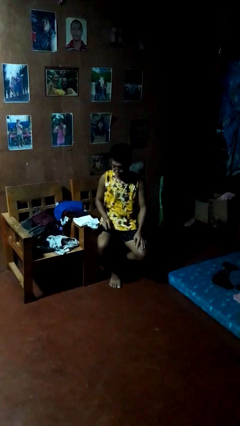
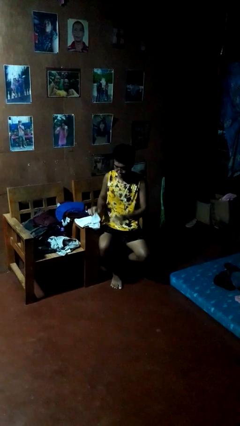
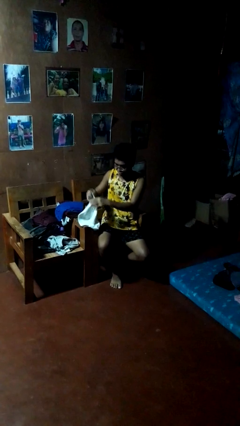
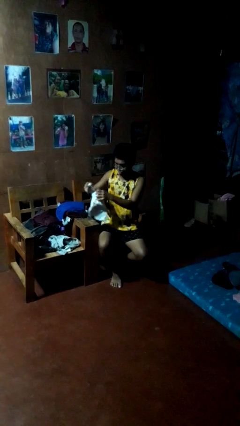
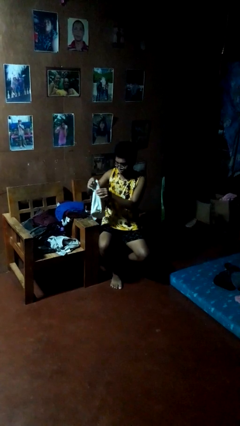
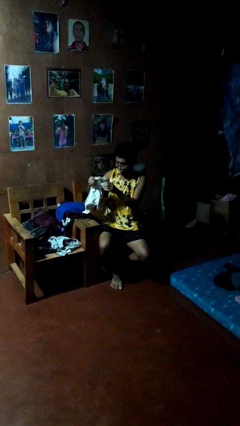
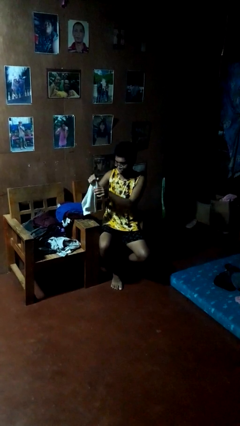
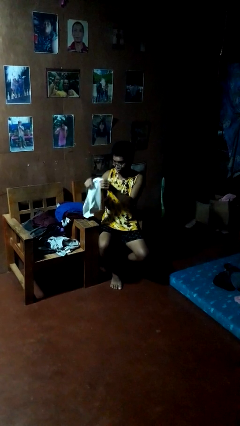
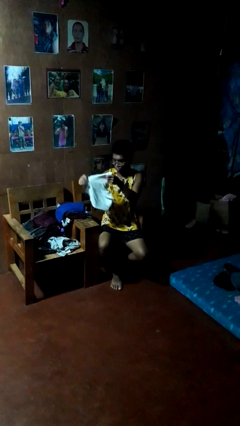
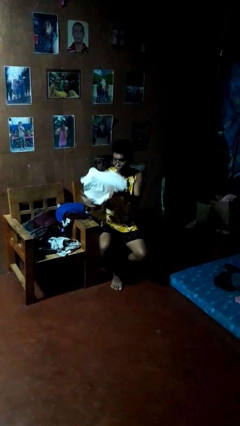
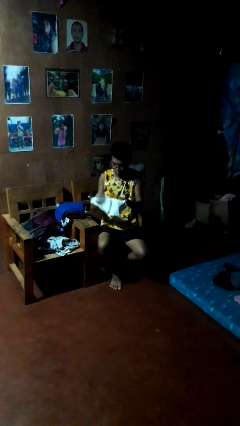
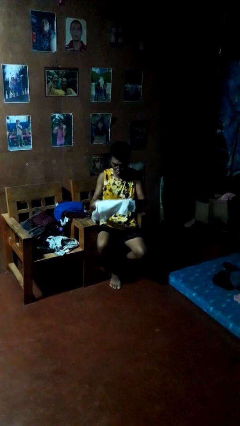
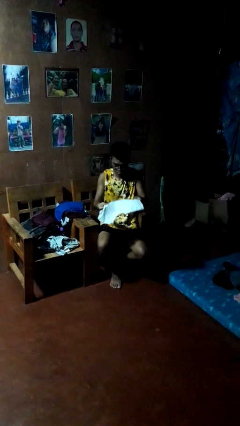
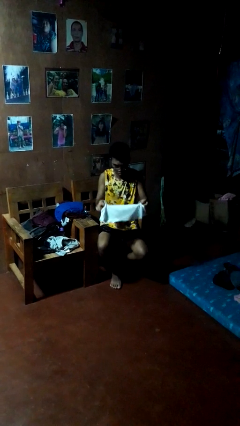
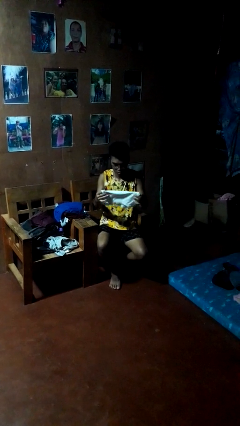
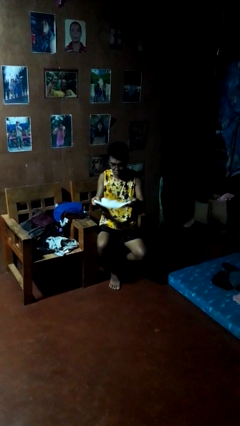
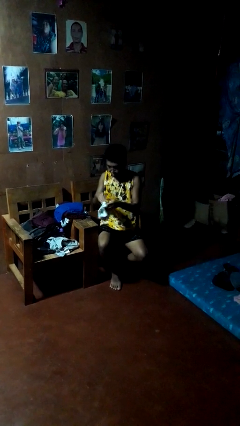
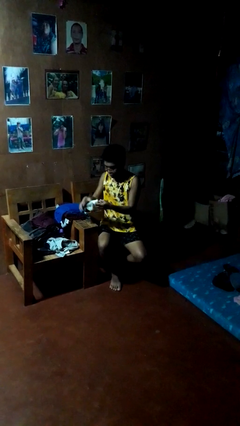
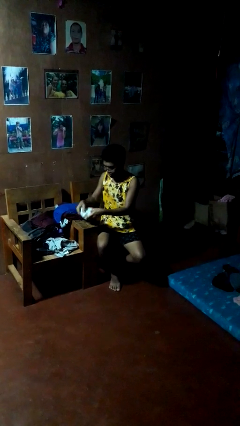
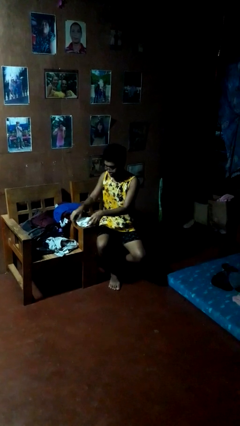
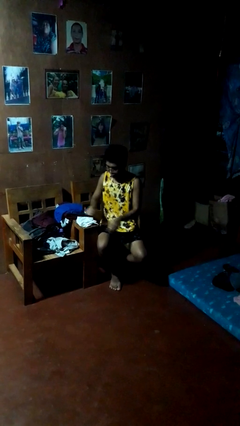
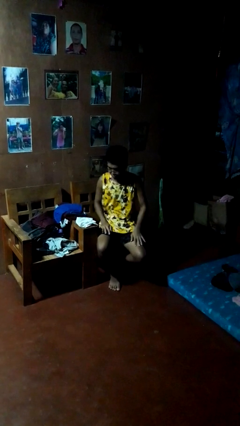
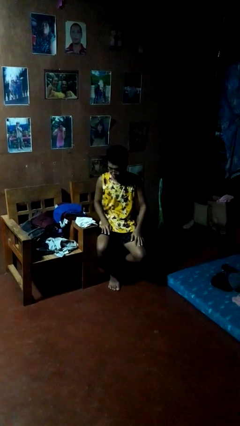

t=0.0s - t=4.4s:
person folds shirt

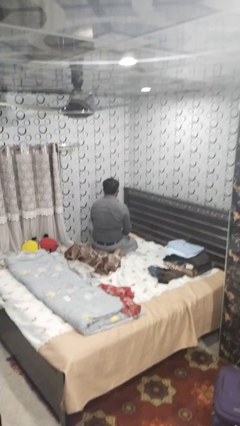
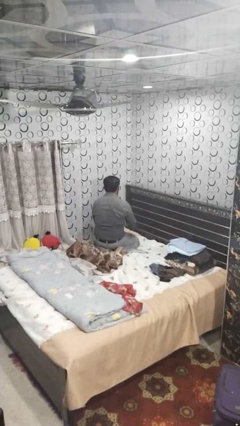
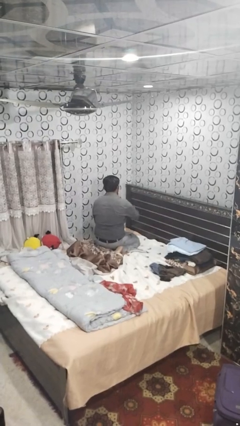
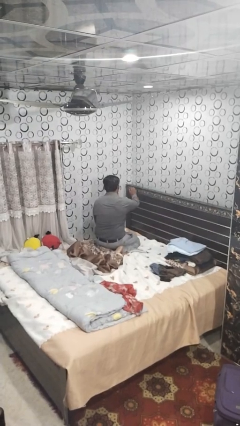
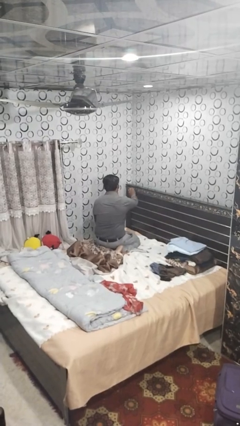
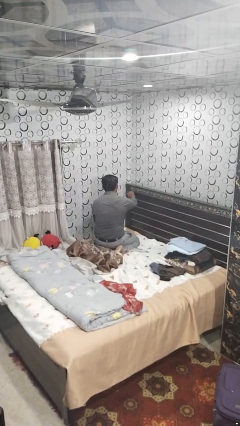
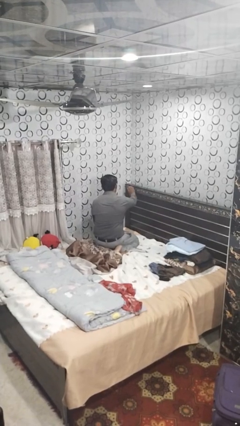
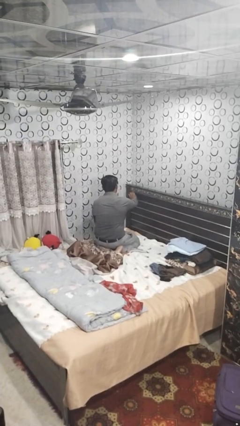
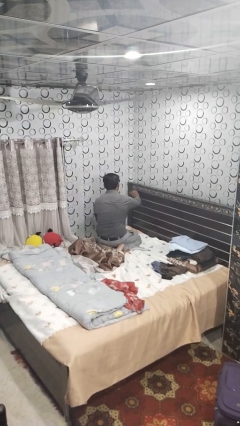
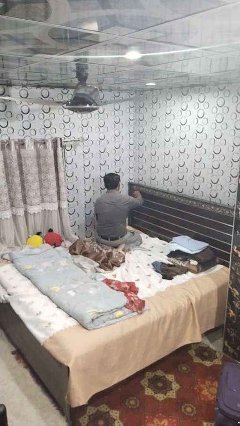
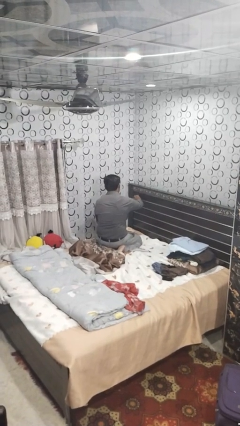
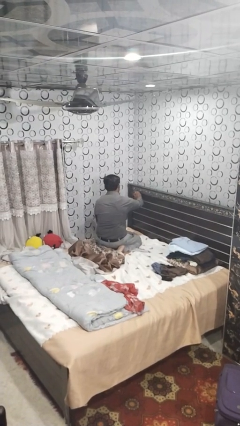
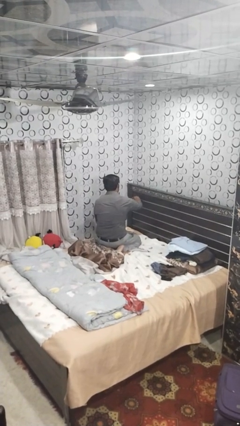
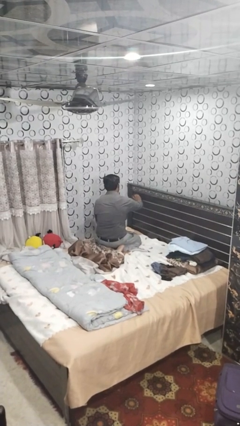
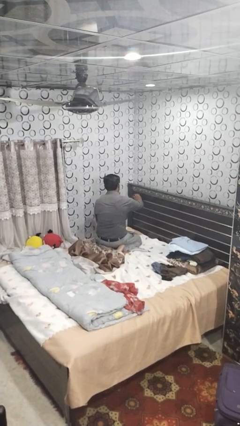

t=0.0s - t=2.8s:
person dusts furniture

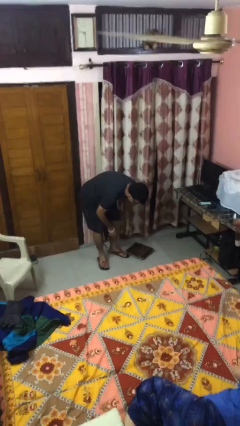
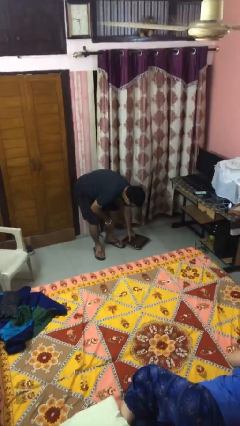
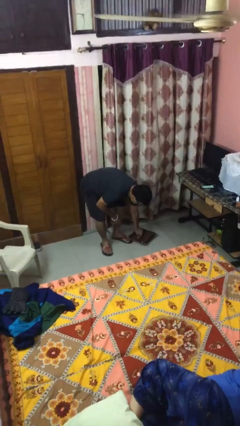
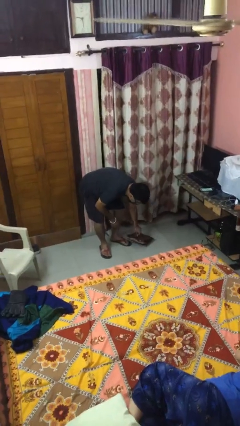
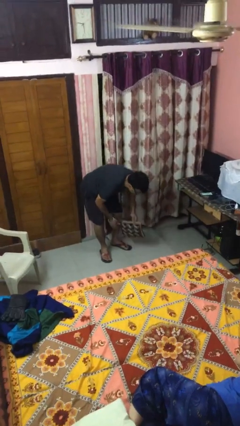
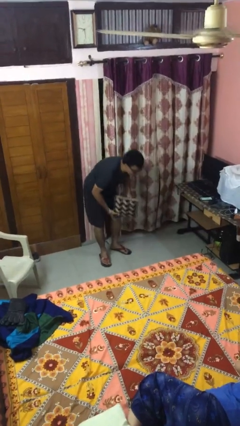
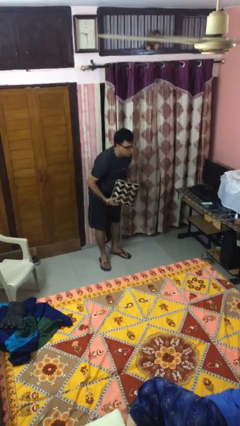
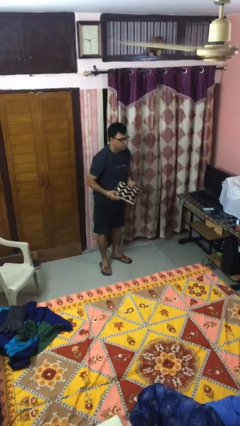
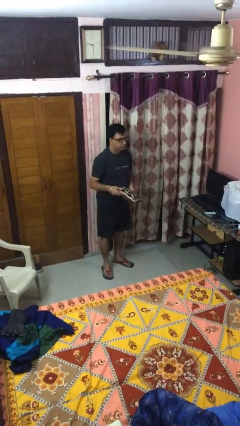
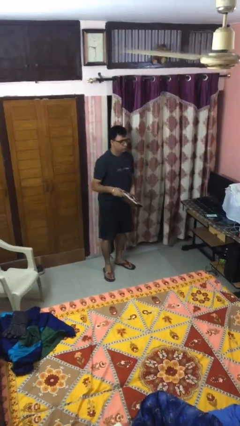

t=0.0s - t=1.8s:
person picks up object from floor

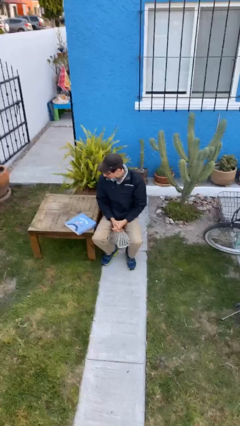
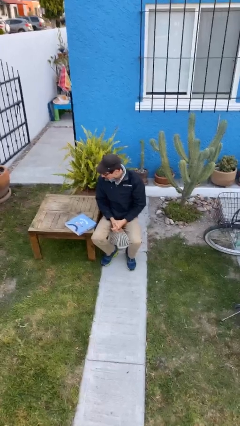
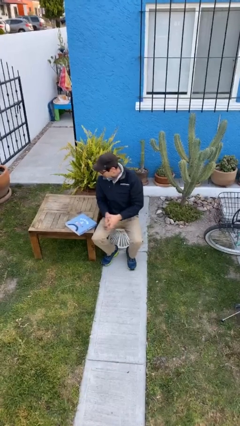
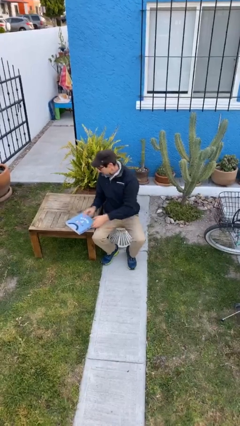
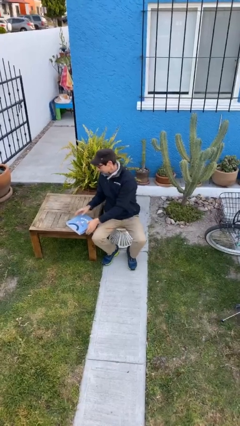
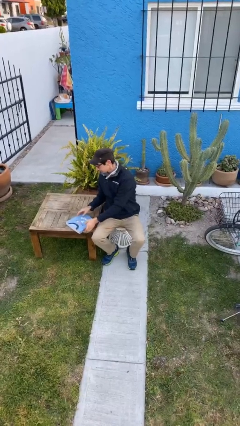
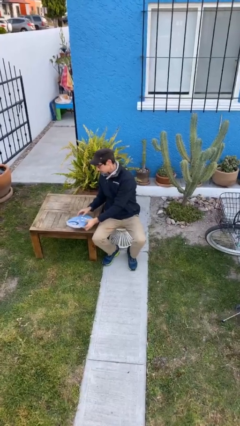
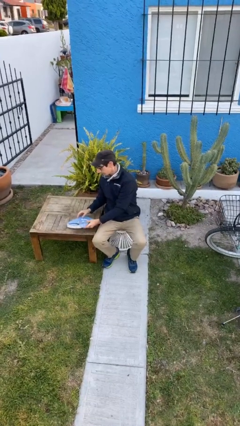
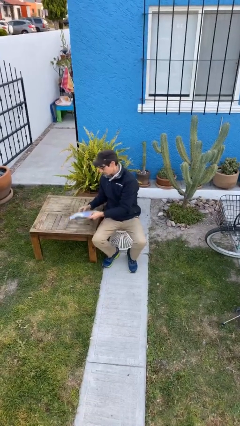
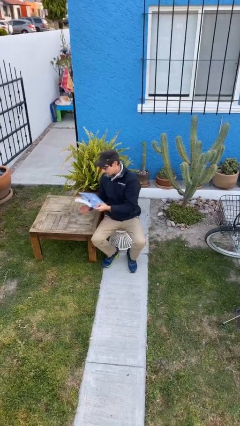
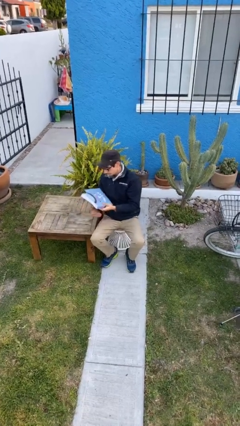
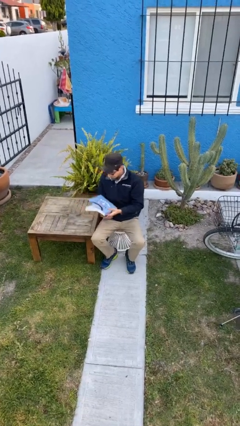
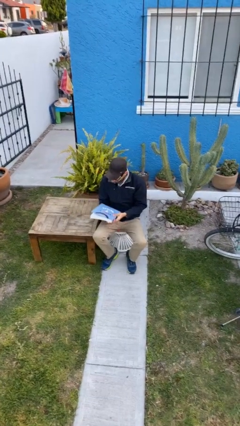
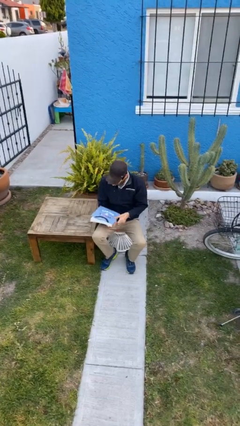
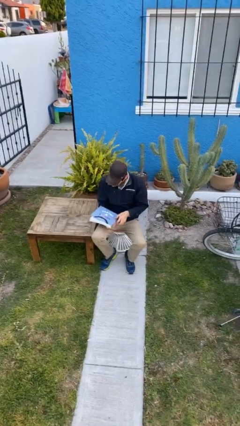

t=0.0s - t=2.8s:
person picks up object from table

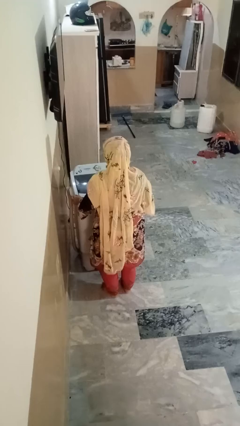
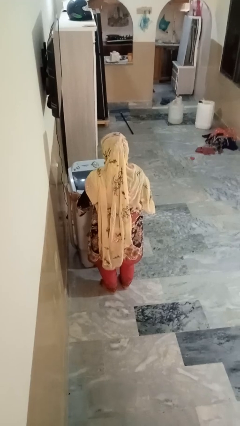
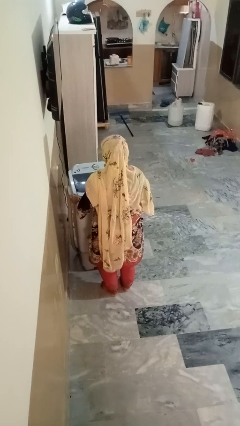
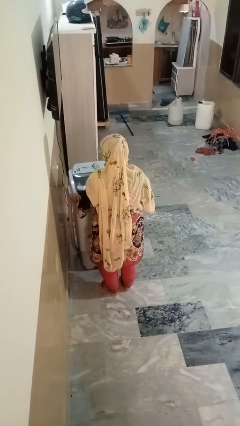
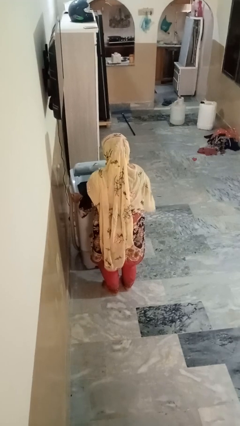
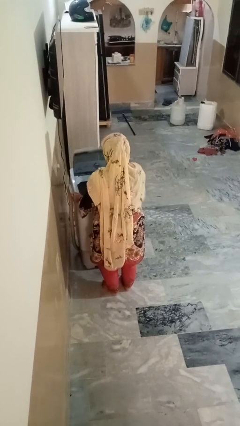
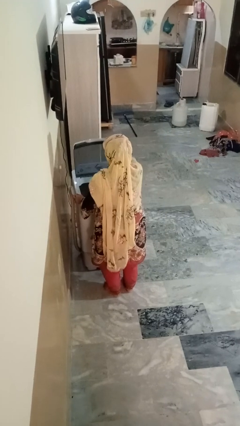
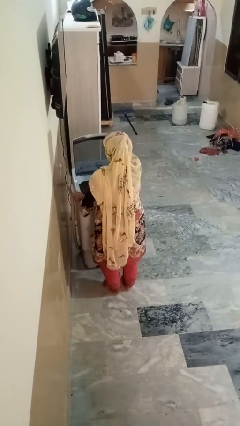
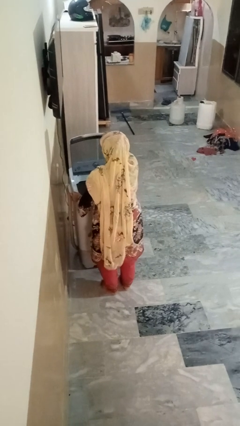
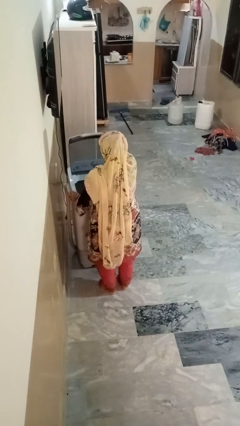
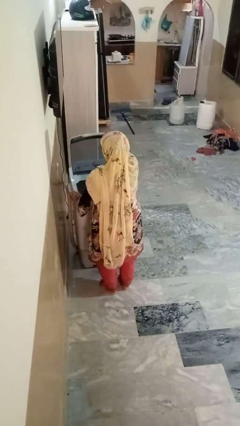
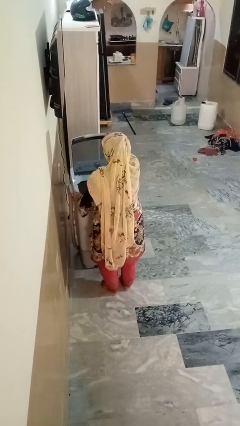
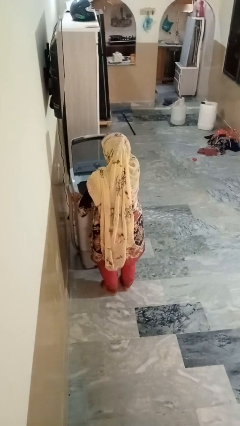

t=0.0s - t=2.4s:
person opens clothes washer

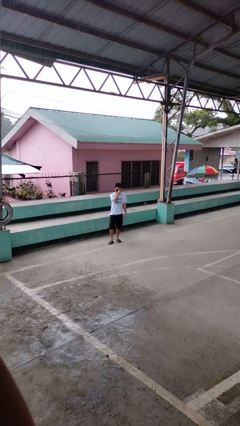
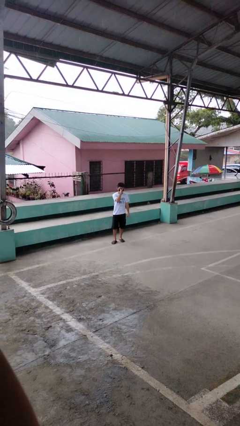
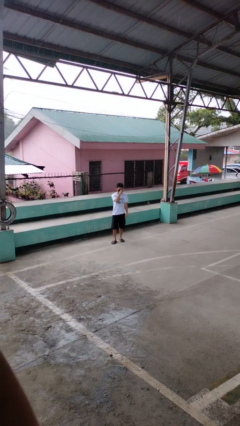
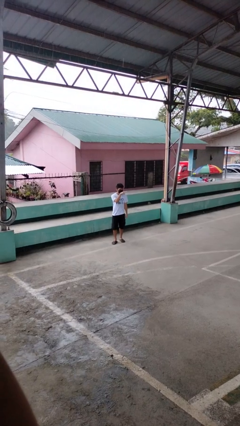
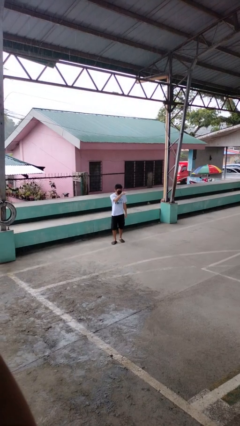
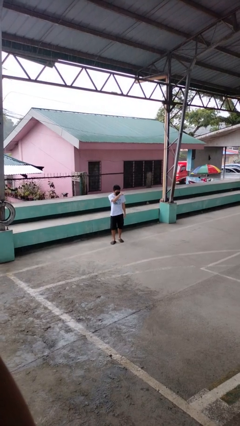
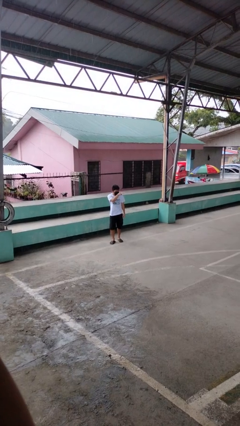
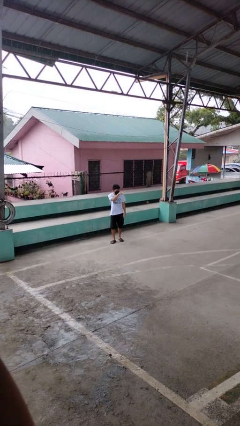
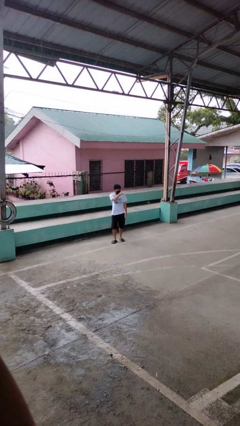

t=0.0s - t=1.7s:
person gestures watch closely

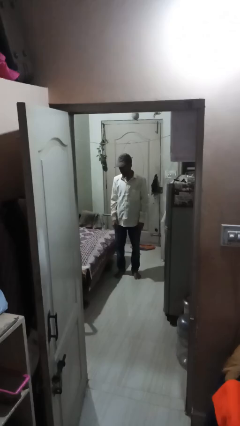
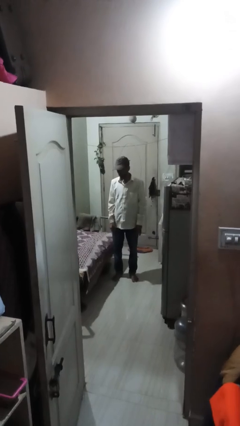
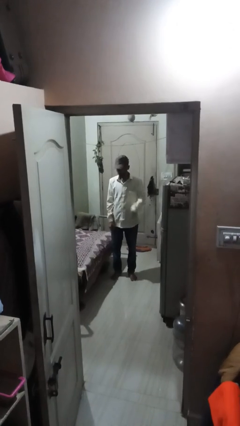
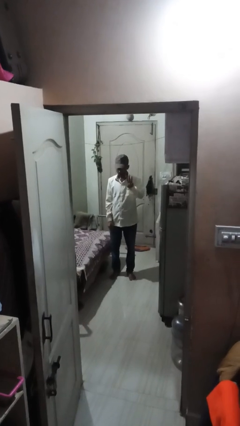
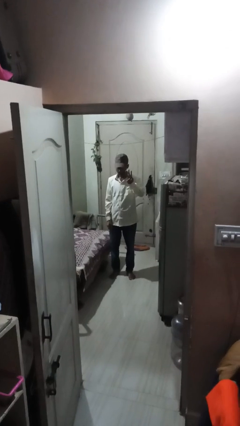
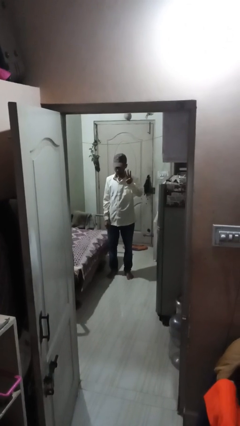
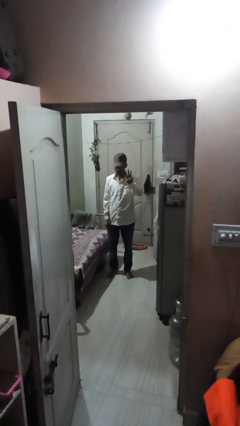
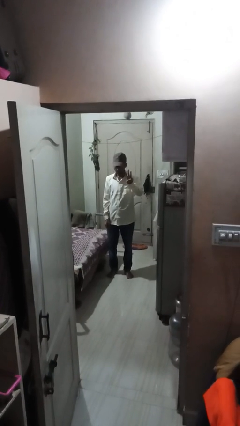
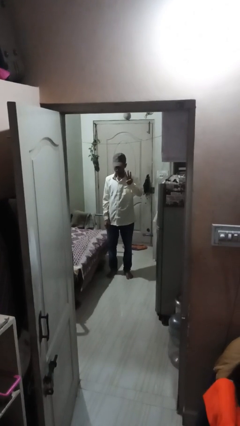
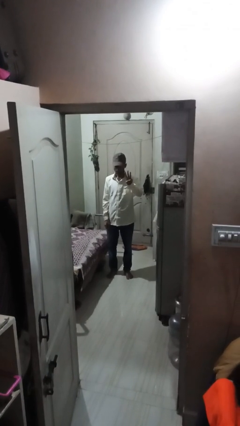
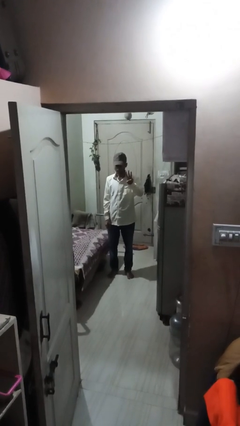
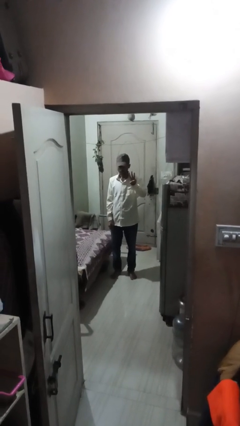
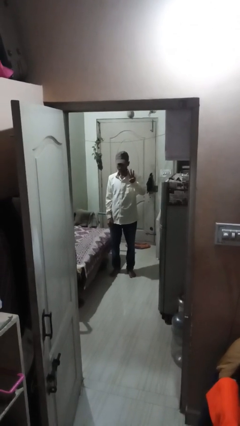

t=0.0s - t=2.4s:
person gestures number three
